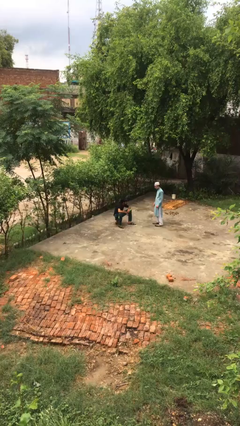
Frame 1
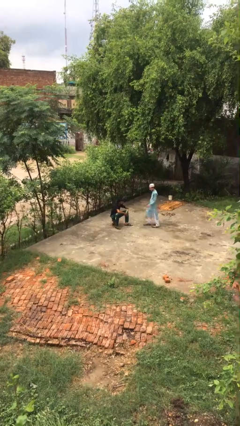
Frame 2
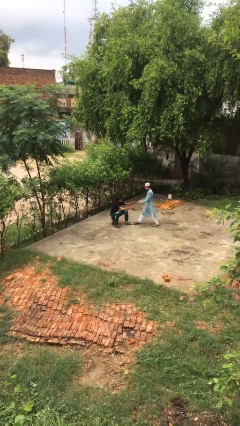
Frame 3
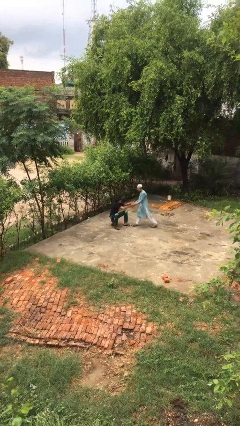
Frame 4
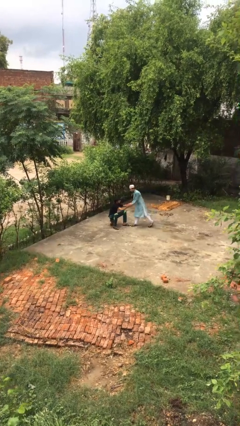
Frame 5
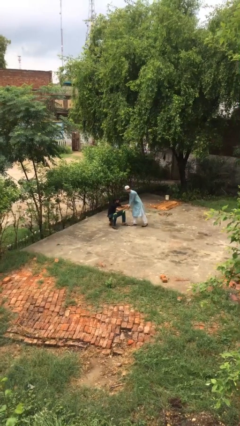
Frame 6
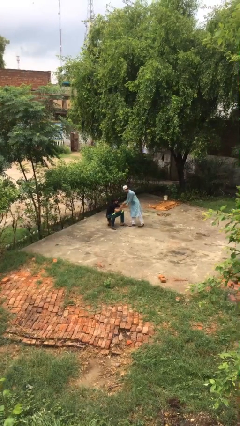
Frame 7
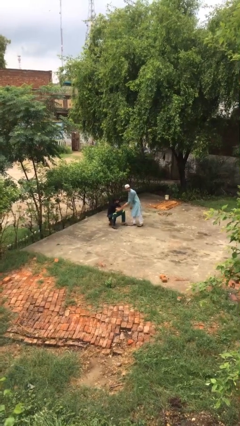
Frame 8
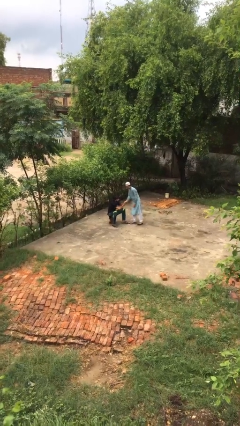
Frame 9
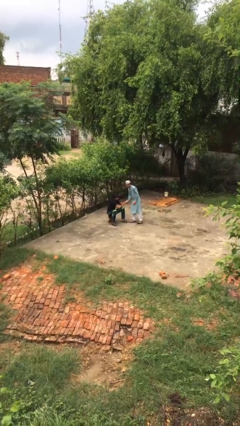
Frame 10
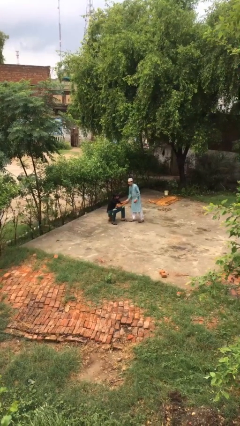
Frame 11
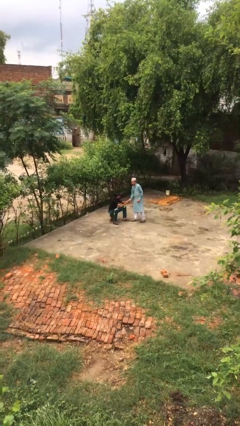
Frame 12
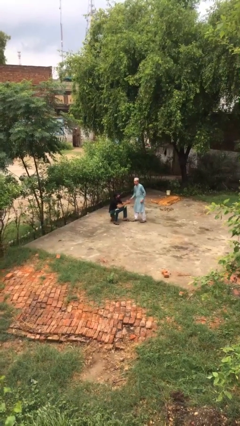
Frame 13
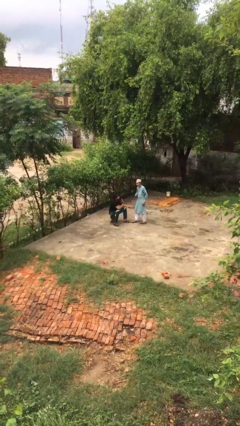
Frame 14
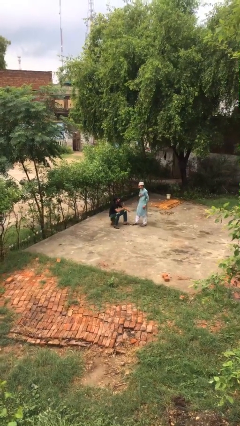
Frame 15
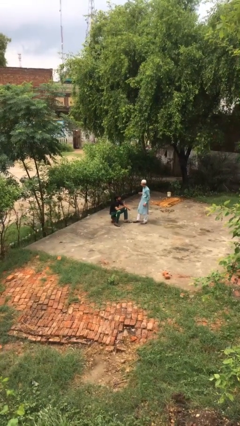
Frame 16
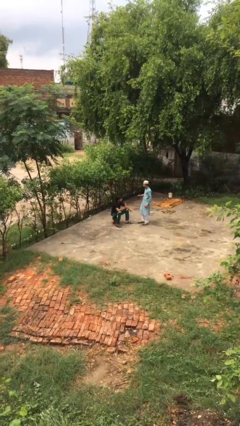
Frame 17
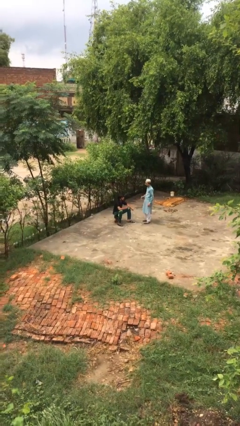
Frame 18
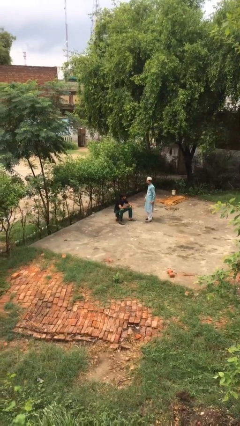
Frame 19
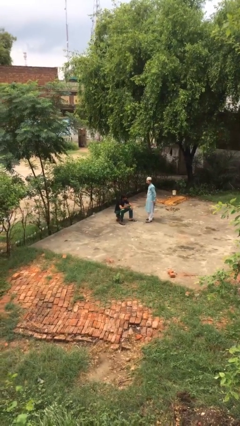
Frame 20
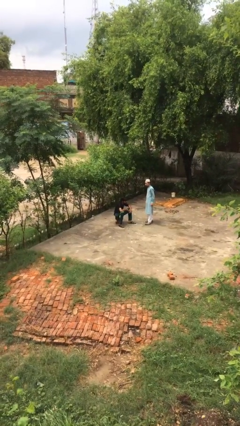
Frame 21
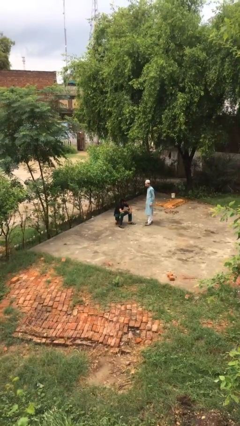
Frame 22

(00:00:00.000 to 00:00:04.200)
person shakes hand

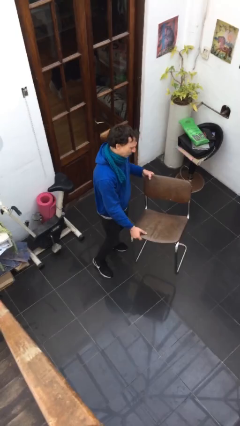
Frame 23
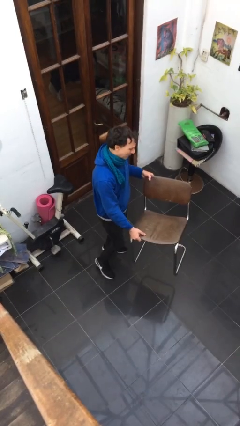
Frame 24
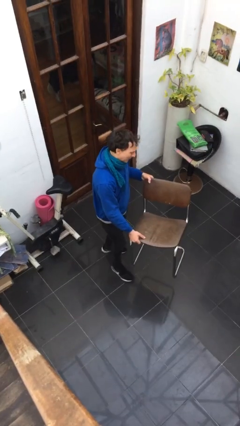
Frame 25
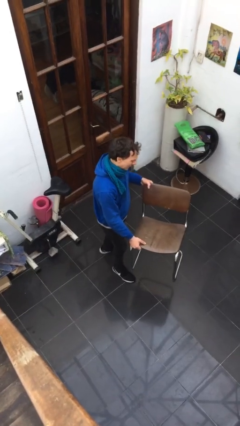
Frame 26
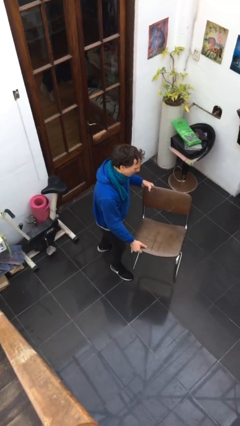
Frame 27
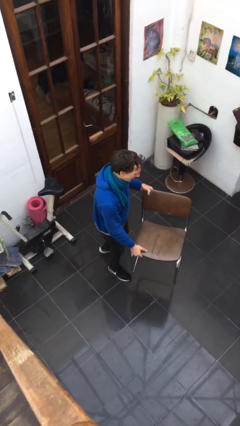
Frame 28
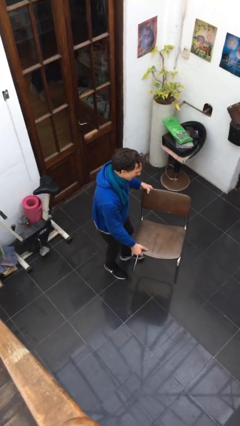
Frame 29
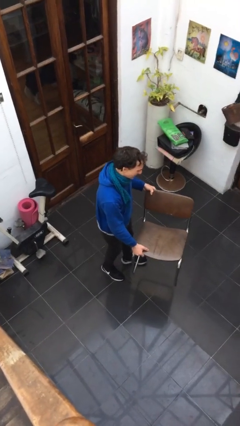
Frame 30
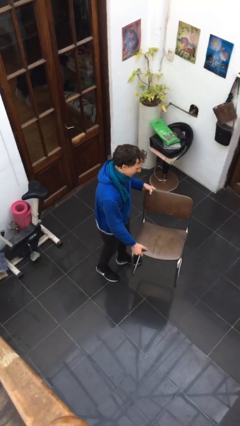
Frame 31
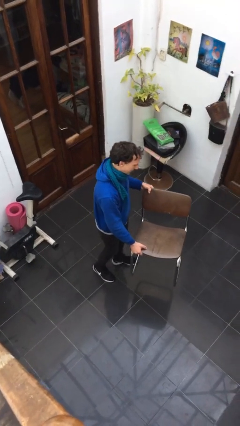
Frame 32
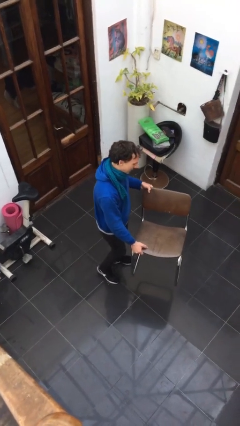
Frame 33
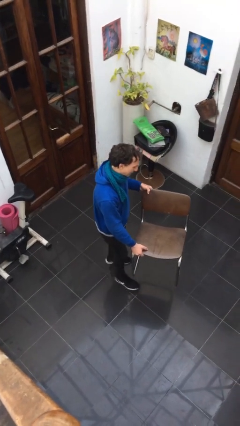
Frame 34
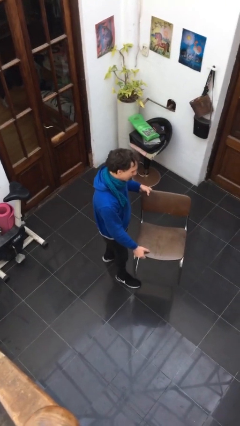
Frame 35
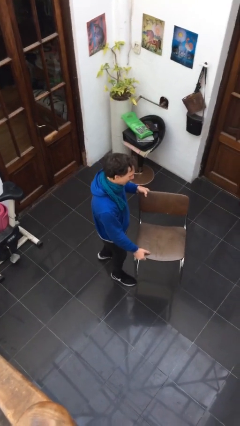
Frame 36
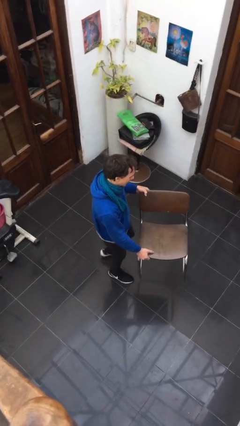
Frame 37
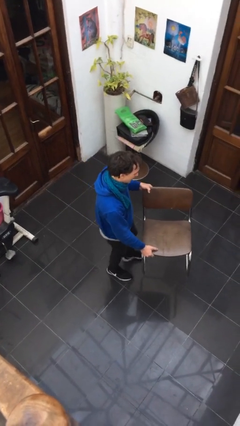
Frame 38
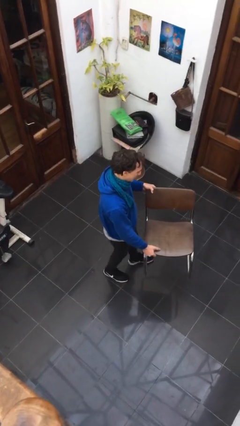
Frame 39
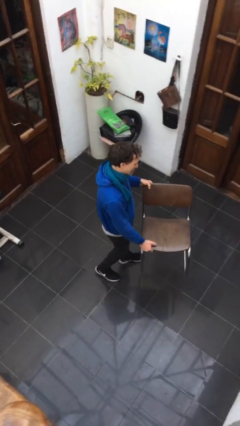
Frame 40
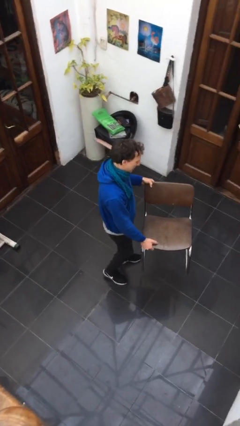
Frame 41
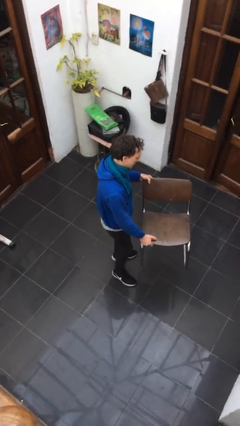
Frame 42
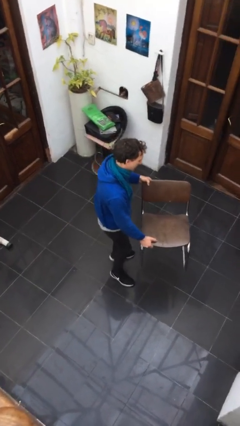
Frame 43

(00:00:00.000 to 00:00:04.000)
person carries heavy object

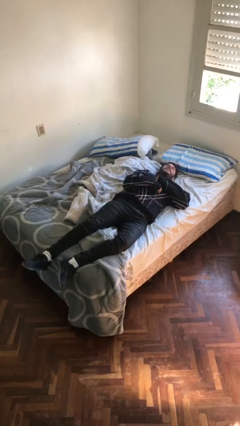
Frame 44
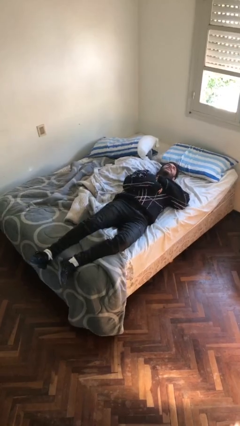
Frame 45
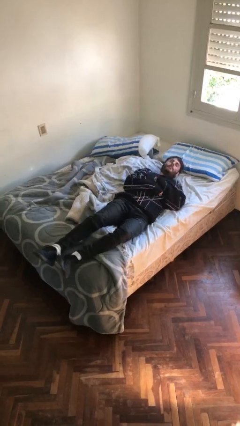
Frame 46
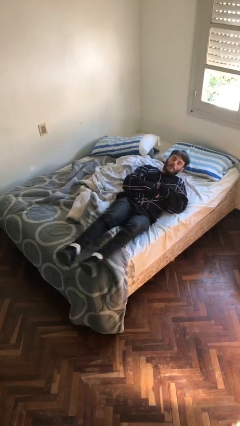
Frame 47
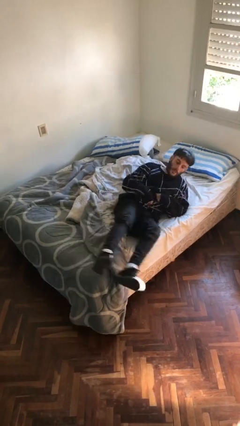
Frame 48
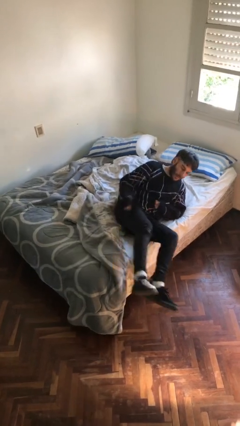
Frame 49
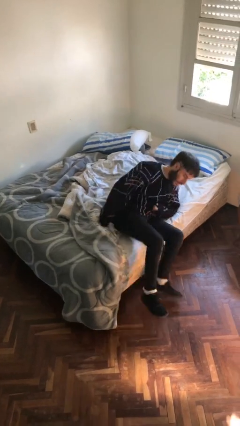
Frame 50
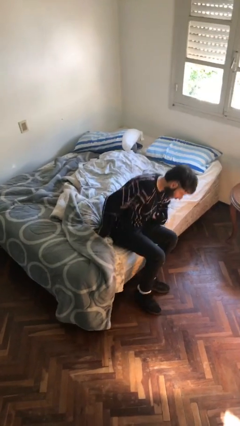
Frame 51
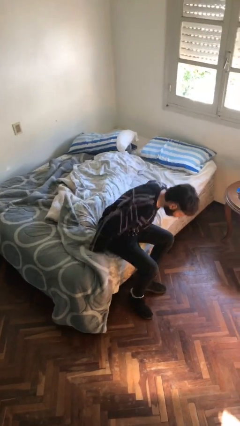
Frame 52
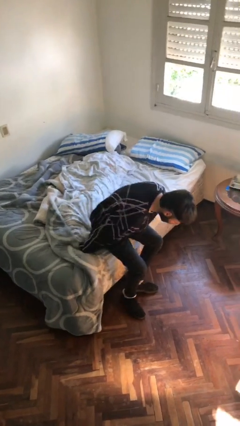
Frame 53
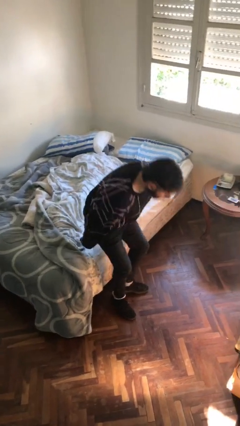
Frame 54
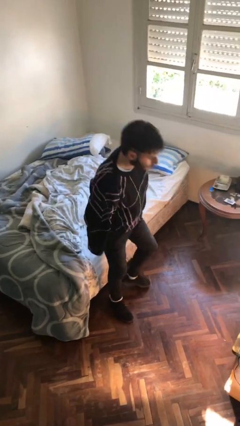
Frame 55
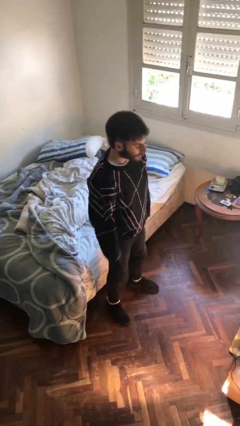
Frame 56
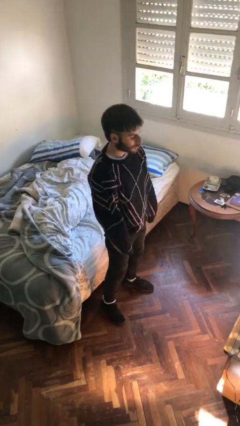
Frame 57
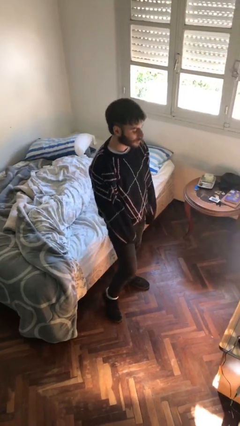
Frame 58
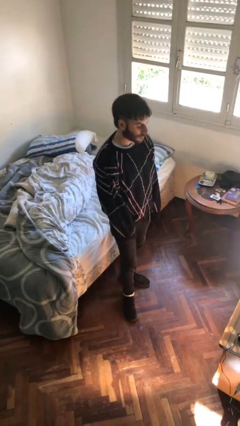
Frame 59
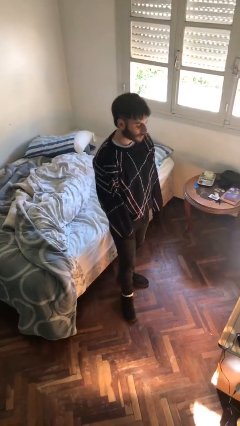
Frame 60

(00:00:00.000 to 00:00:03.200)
person stands up

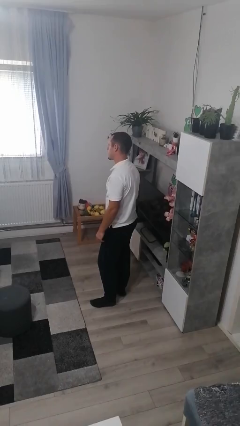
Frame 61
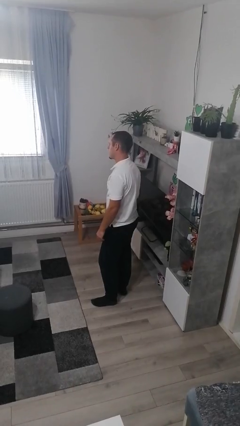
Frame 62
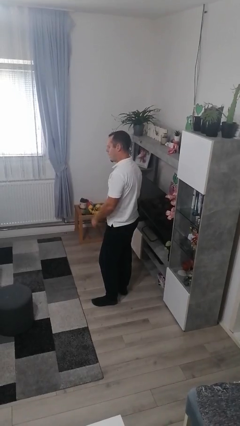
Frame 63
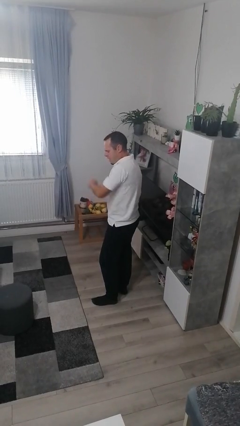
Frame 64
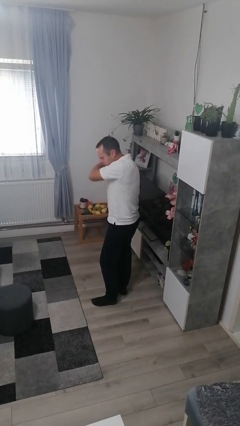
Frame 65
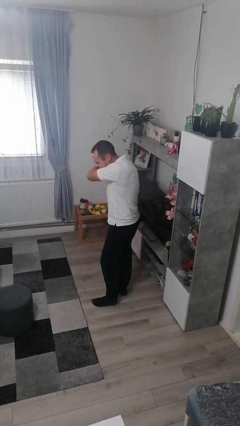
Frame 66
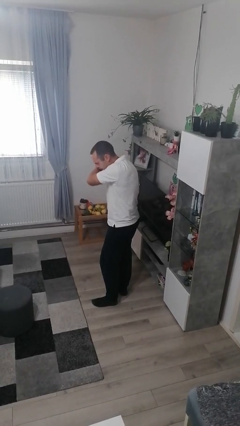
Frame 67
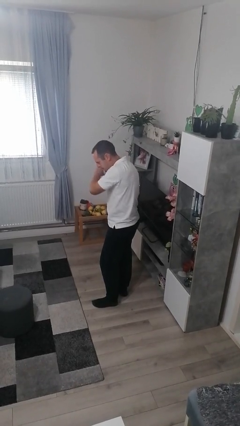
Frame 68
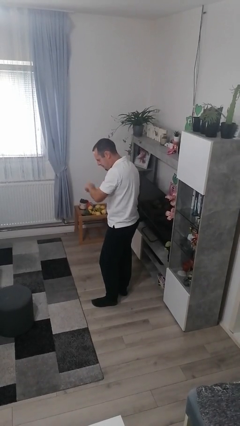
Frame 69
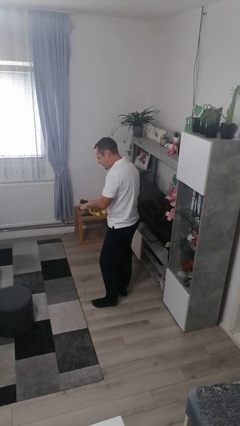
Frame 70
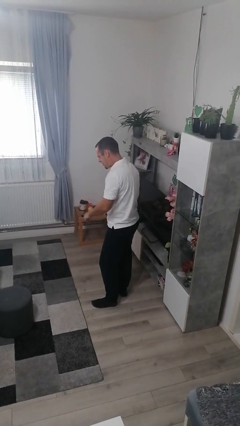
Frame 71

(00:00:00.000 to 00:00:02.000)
person sneezes into arm

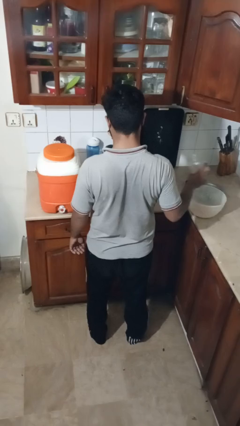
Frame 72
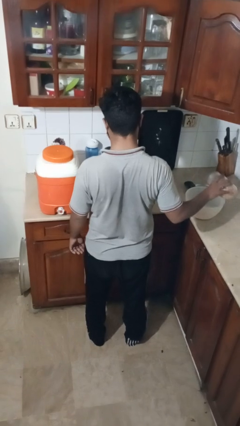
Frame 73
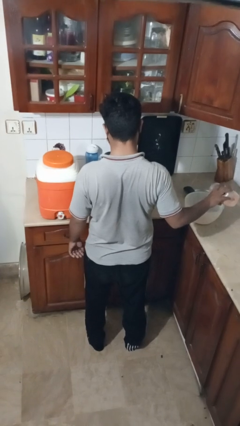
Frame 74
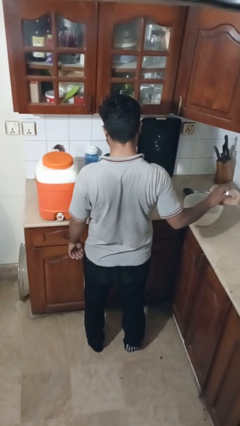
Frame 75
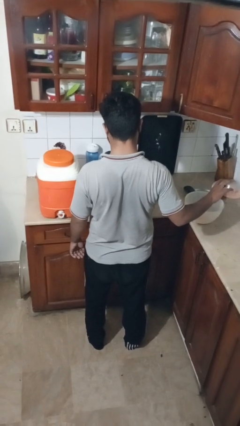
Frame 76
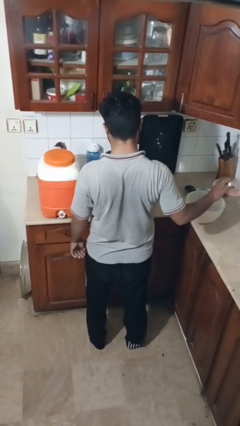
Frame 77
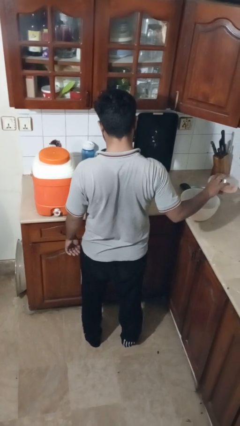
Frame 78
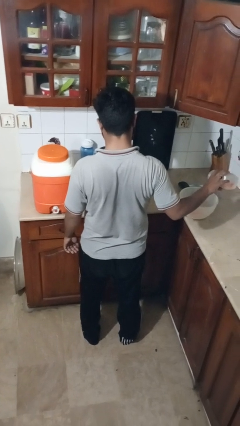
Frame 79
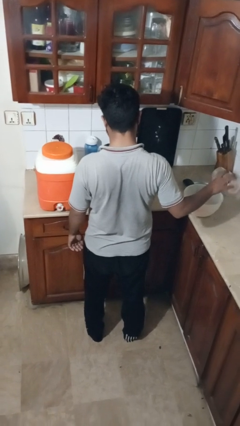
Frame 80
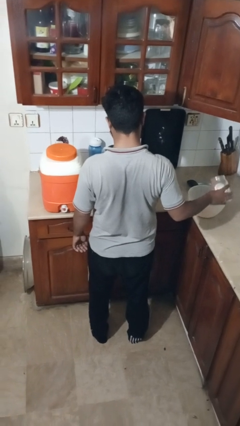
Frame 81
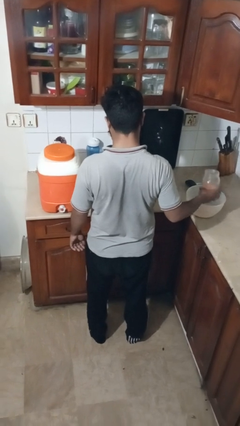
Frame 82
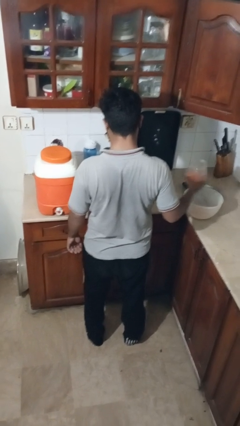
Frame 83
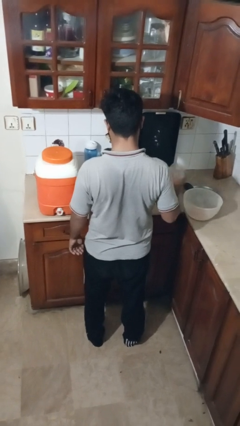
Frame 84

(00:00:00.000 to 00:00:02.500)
person pours into bowl

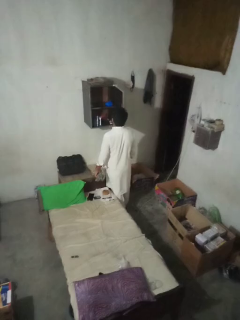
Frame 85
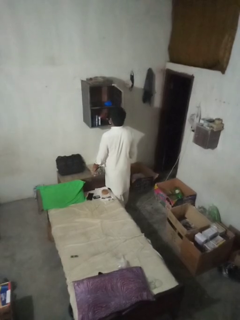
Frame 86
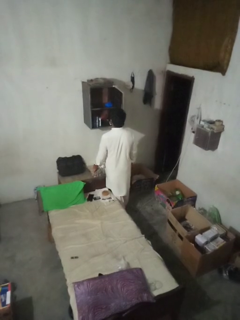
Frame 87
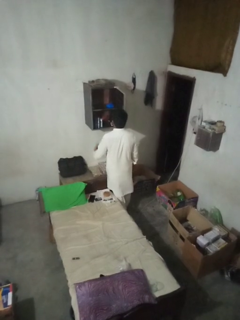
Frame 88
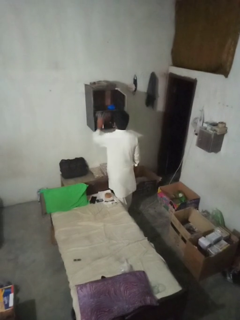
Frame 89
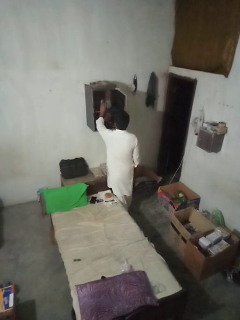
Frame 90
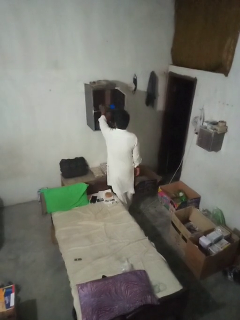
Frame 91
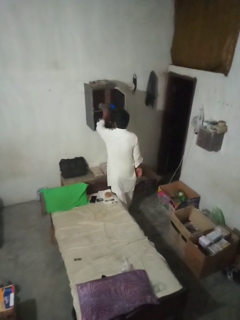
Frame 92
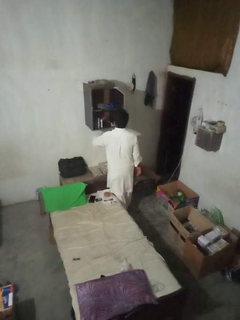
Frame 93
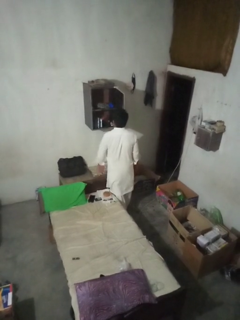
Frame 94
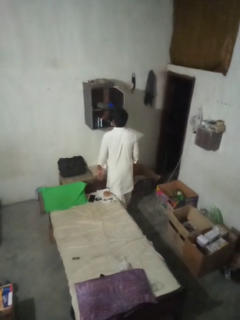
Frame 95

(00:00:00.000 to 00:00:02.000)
person puts clothes into dresser
